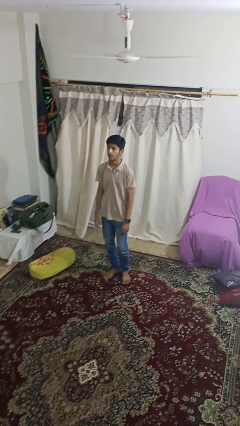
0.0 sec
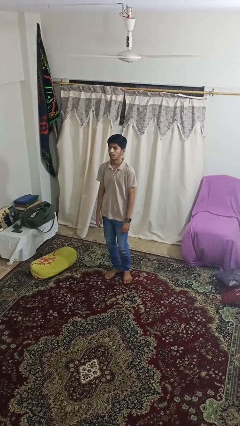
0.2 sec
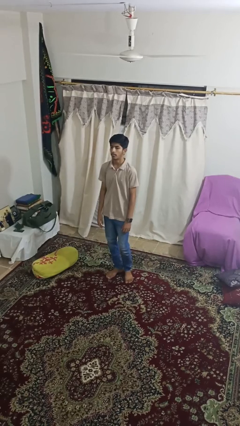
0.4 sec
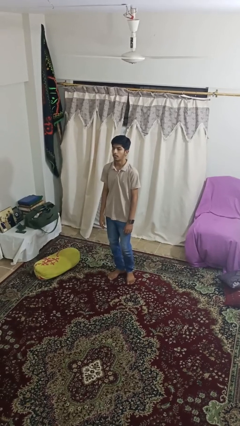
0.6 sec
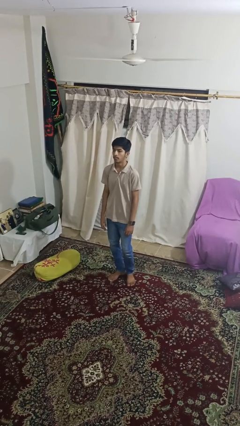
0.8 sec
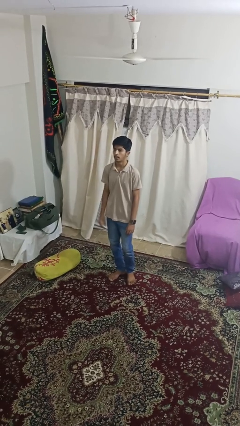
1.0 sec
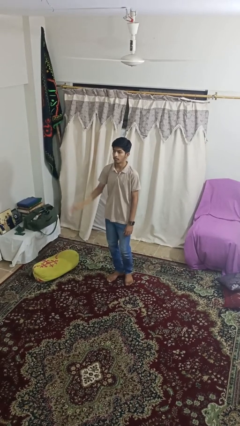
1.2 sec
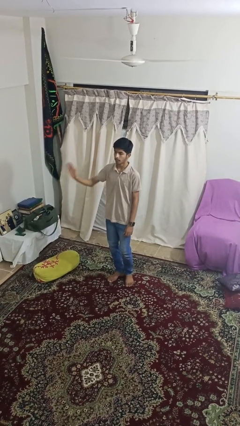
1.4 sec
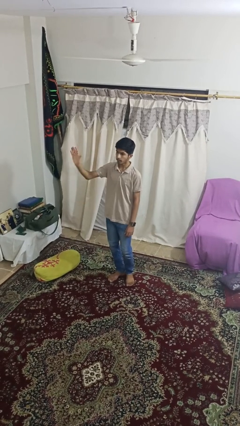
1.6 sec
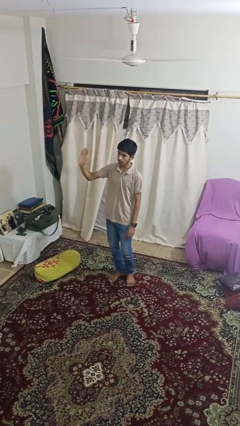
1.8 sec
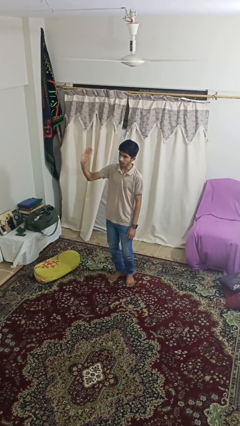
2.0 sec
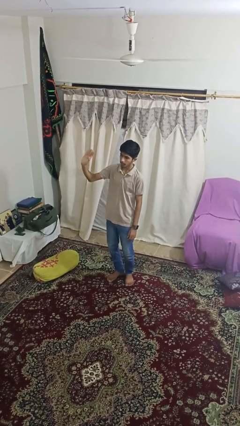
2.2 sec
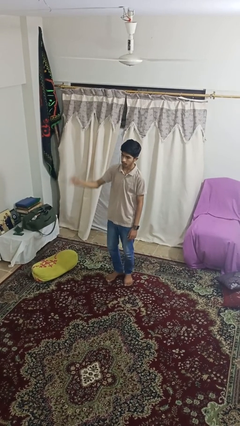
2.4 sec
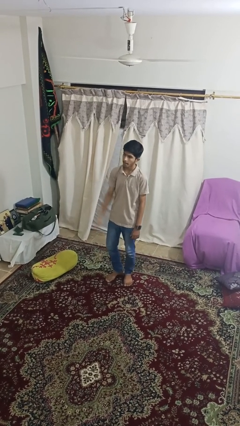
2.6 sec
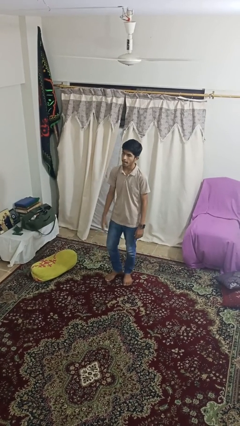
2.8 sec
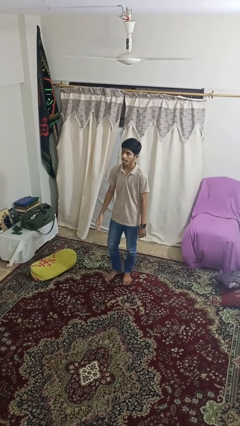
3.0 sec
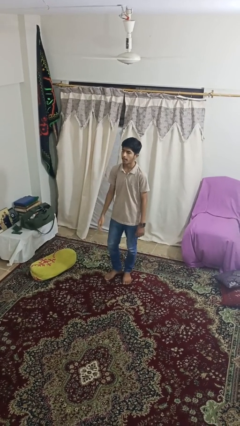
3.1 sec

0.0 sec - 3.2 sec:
person waves at person

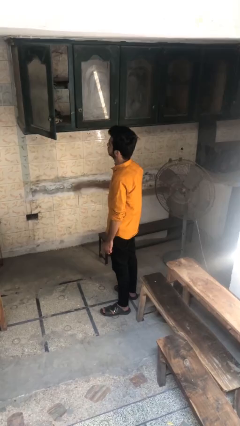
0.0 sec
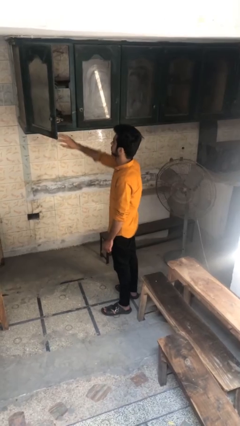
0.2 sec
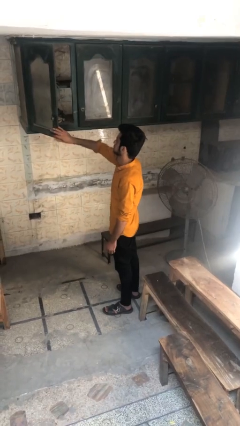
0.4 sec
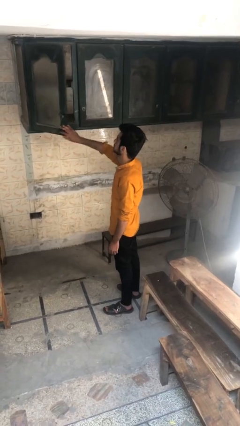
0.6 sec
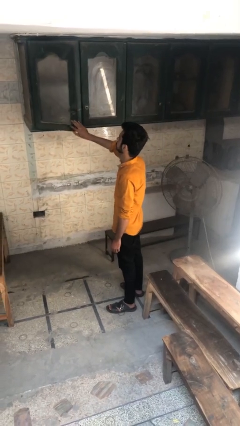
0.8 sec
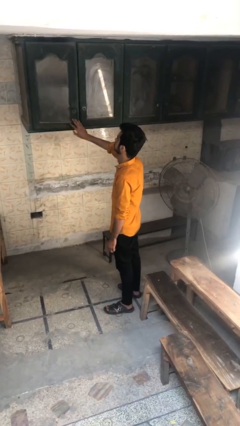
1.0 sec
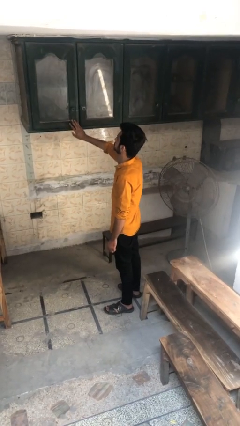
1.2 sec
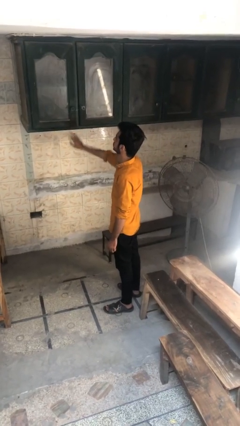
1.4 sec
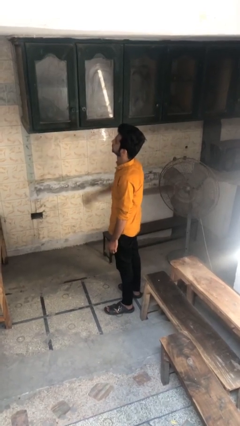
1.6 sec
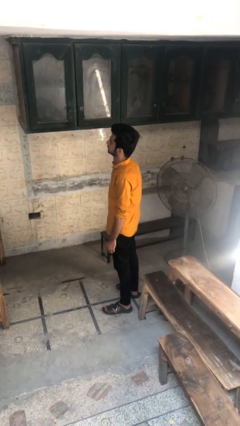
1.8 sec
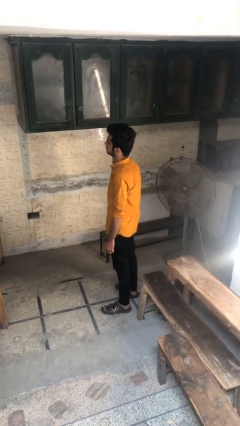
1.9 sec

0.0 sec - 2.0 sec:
person closes cabinet

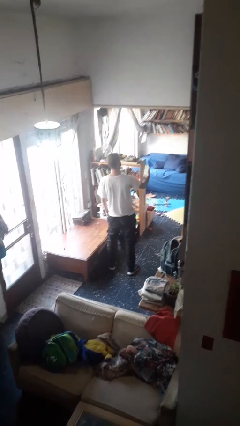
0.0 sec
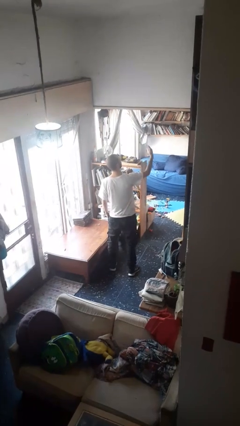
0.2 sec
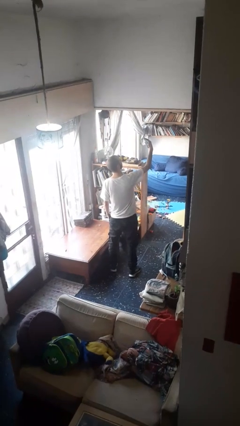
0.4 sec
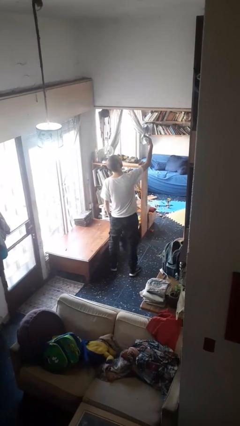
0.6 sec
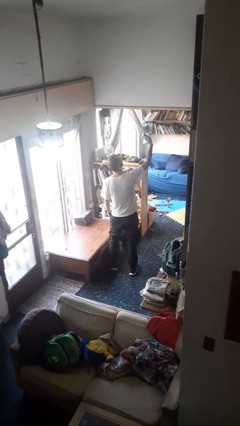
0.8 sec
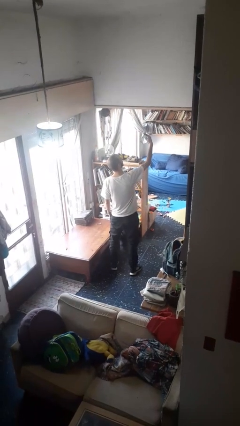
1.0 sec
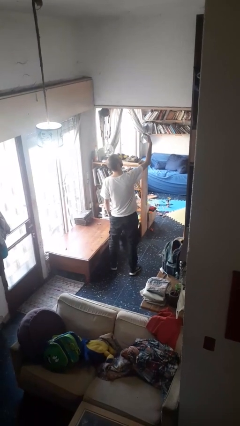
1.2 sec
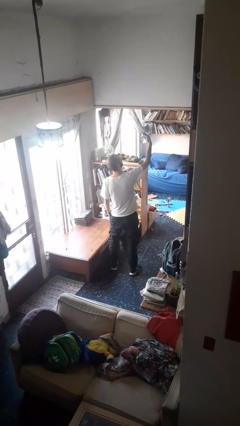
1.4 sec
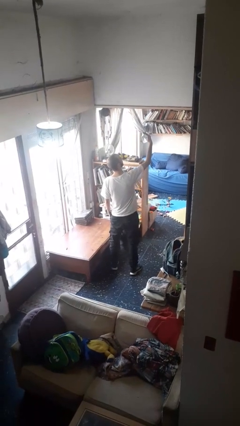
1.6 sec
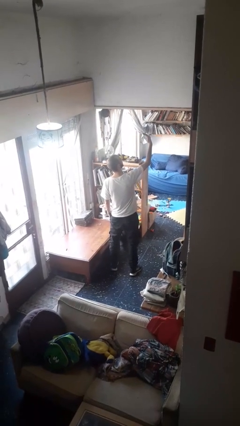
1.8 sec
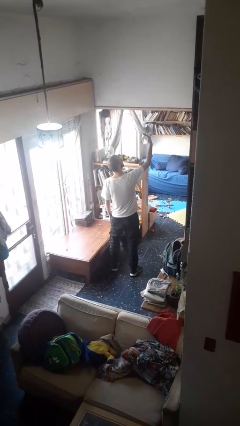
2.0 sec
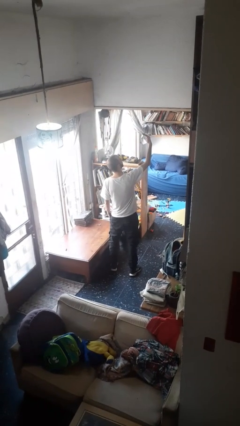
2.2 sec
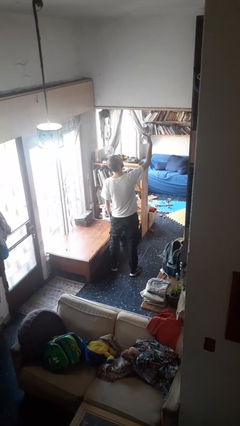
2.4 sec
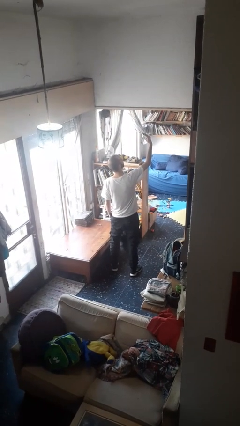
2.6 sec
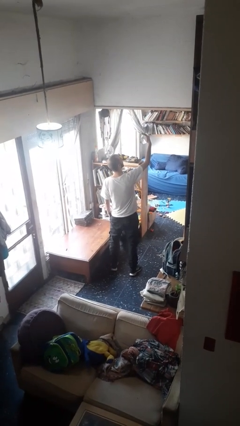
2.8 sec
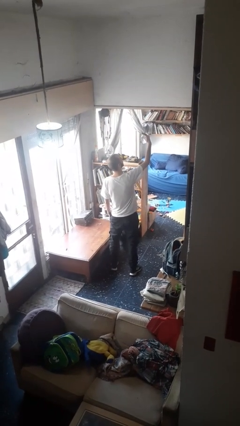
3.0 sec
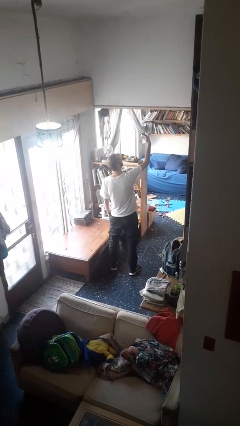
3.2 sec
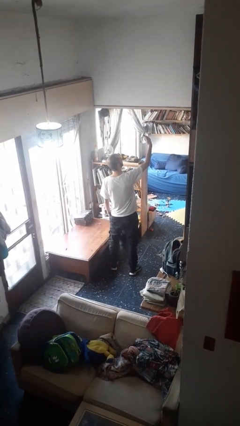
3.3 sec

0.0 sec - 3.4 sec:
person takes selfie

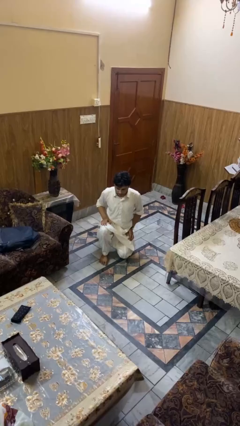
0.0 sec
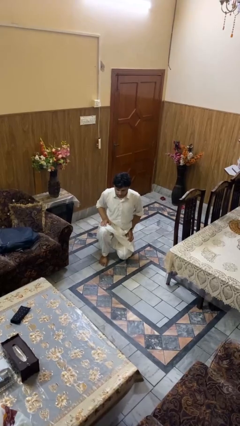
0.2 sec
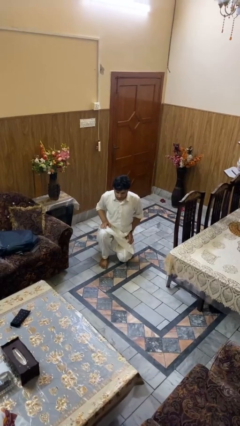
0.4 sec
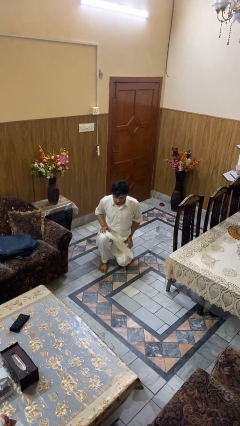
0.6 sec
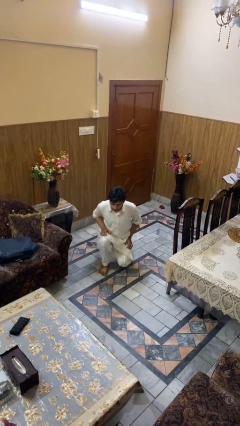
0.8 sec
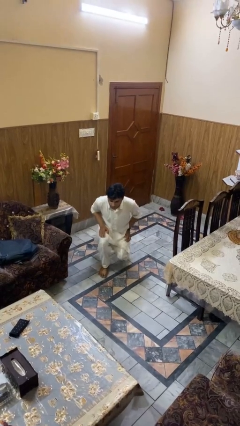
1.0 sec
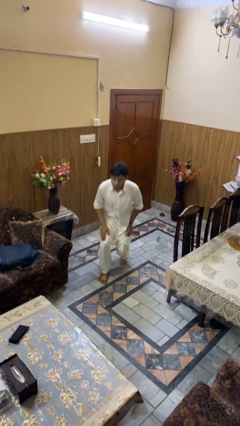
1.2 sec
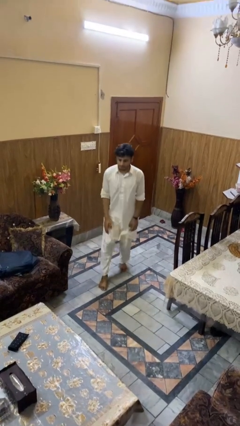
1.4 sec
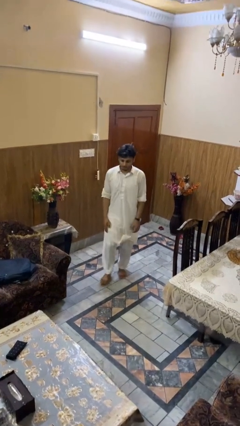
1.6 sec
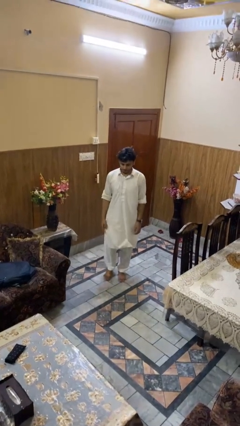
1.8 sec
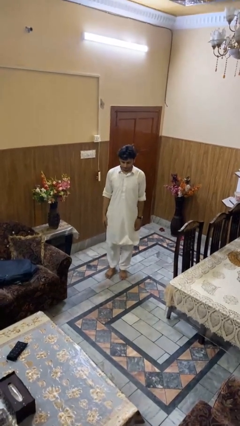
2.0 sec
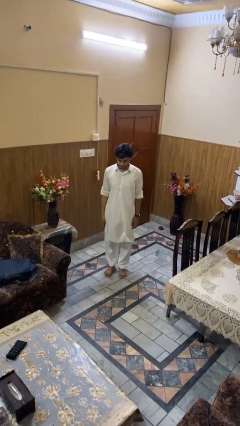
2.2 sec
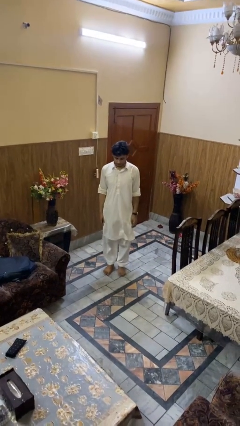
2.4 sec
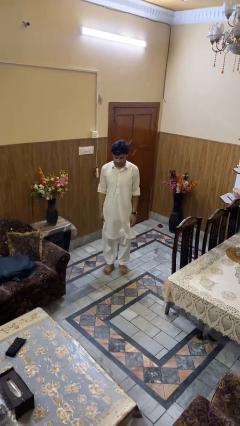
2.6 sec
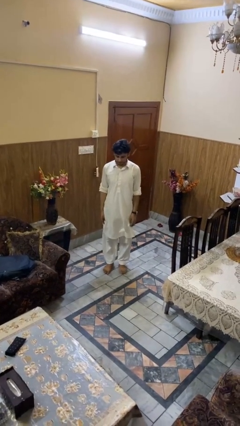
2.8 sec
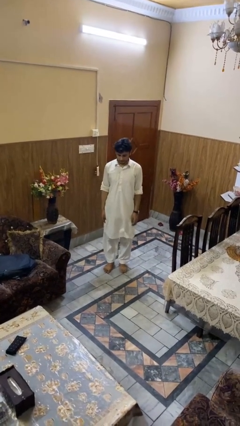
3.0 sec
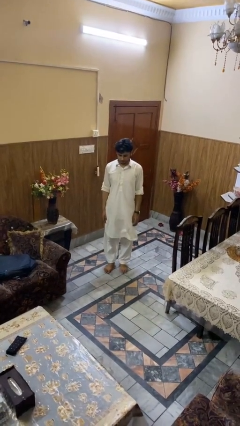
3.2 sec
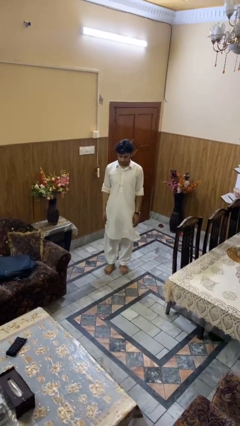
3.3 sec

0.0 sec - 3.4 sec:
person stands up from floor

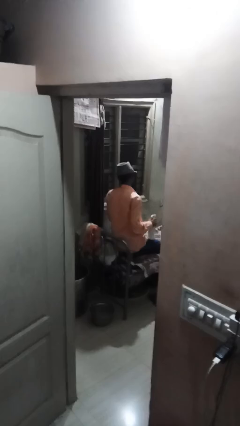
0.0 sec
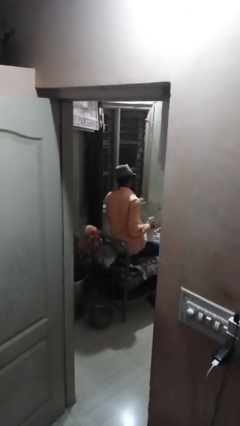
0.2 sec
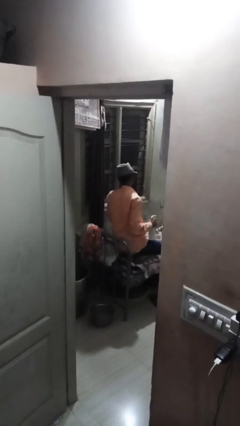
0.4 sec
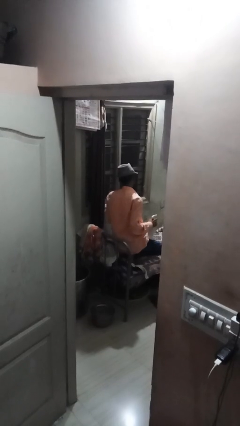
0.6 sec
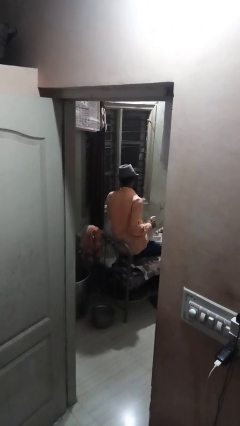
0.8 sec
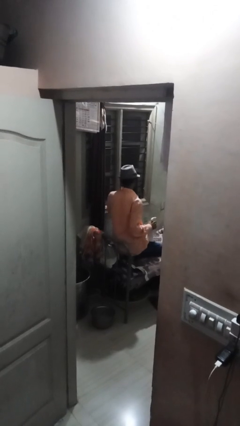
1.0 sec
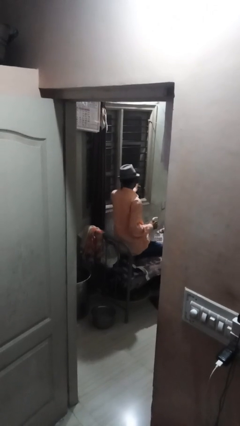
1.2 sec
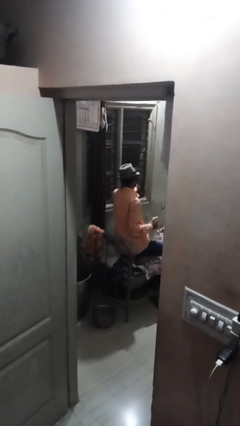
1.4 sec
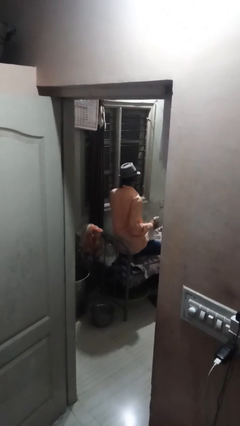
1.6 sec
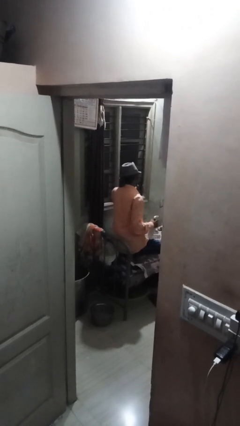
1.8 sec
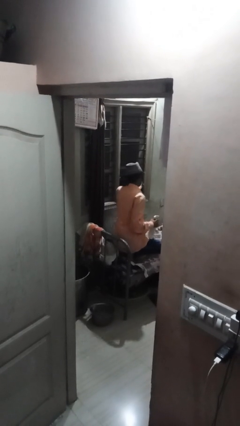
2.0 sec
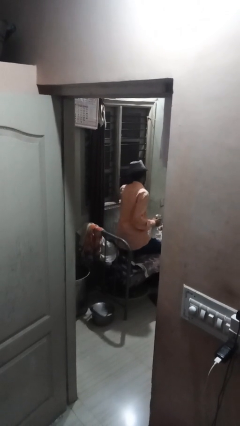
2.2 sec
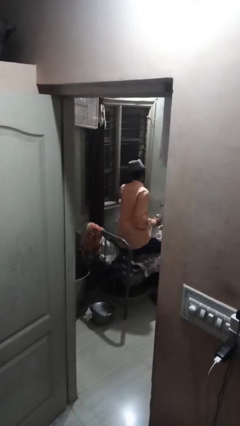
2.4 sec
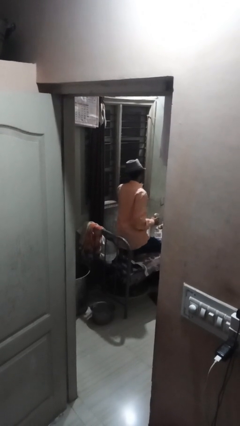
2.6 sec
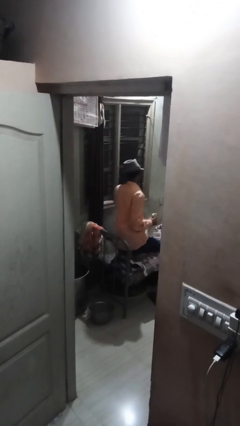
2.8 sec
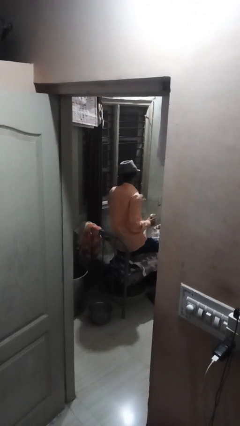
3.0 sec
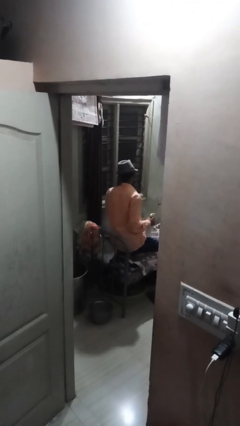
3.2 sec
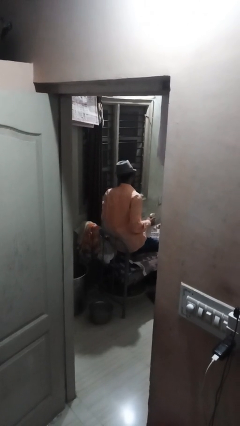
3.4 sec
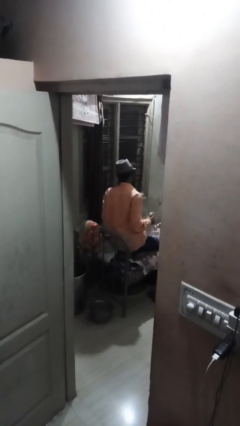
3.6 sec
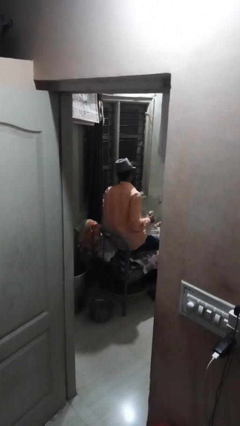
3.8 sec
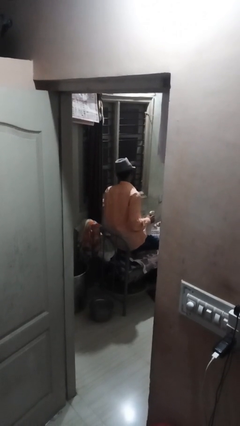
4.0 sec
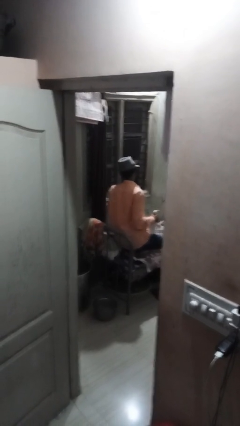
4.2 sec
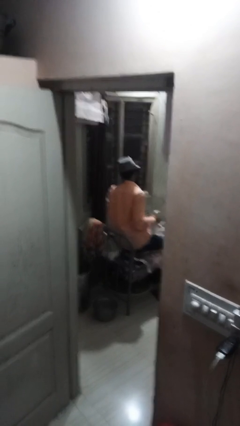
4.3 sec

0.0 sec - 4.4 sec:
person washes window

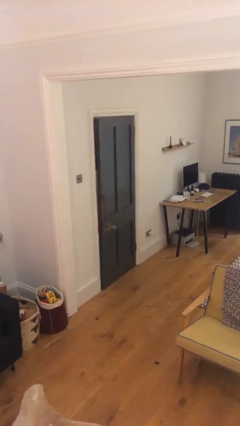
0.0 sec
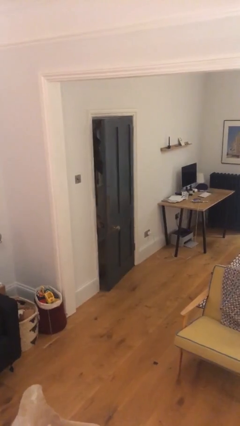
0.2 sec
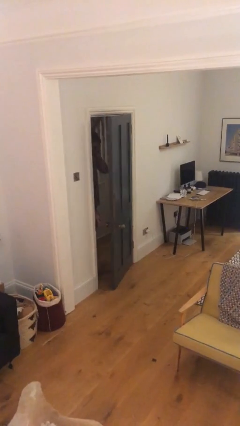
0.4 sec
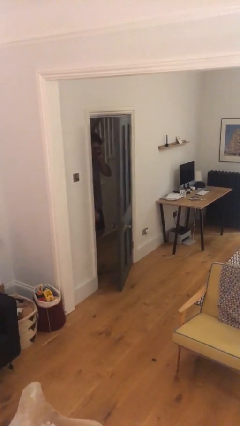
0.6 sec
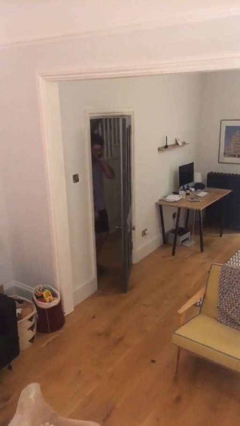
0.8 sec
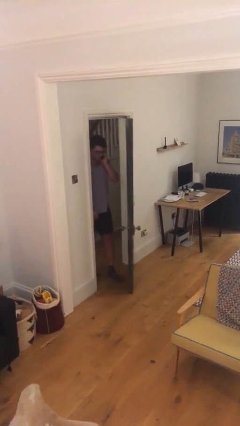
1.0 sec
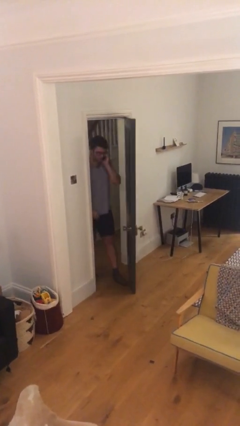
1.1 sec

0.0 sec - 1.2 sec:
person opens facility door

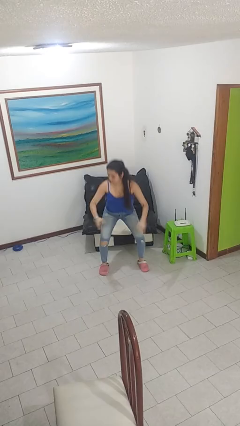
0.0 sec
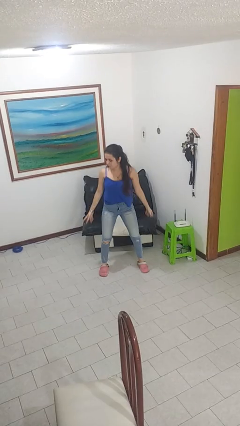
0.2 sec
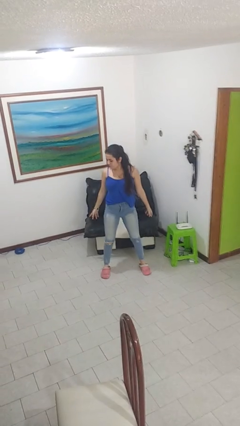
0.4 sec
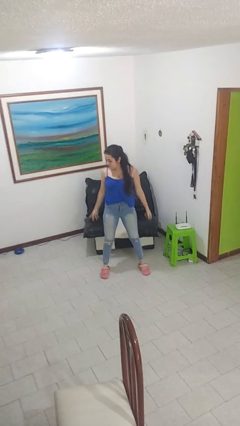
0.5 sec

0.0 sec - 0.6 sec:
person stands up
